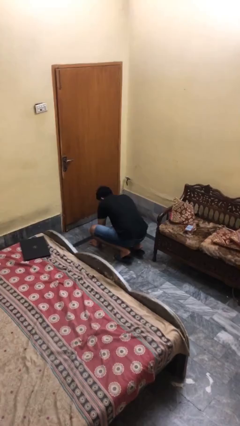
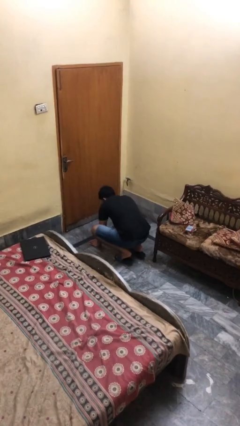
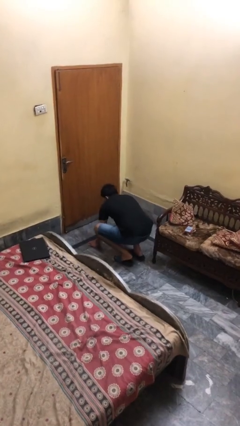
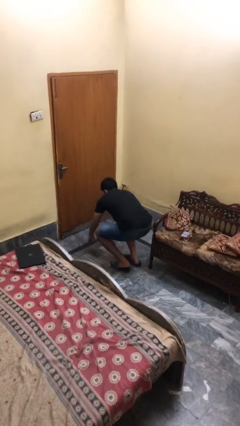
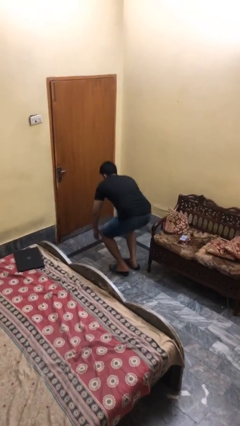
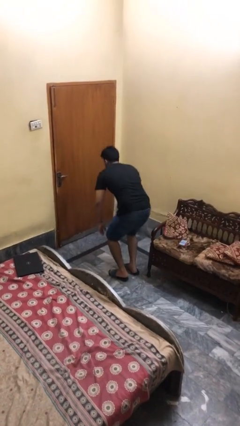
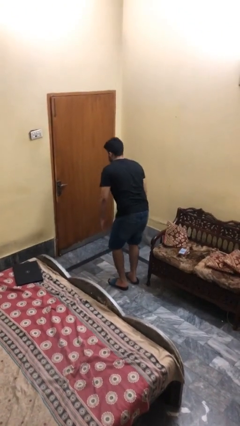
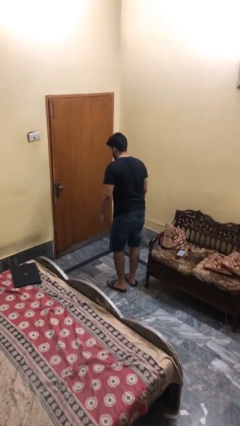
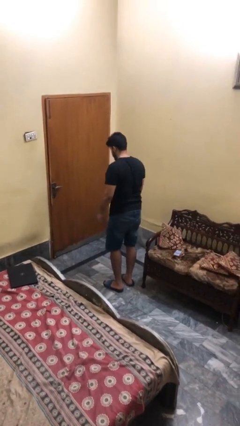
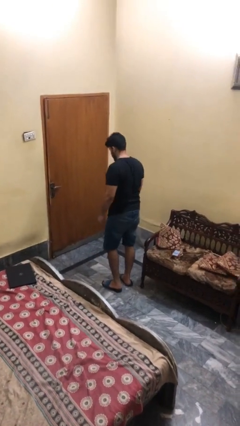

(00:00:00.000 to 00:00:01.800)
person stands up from floor

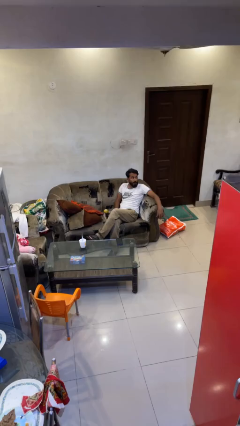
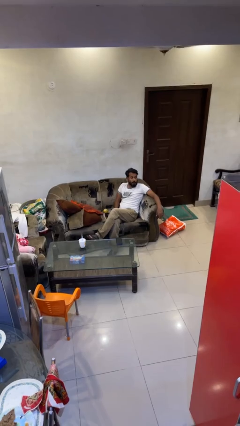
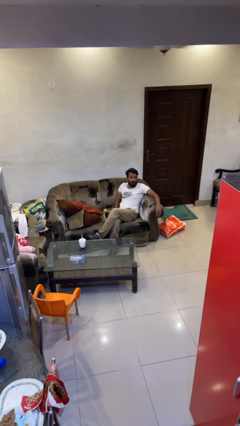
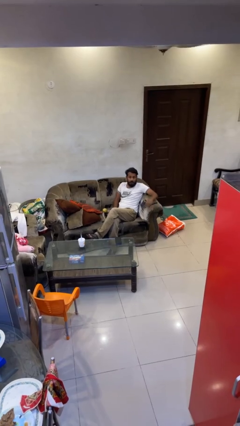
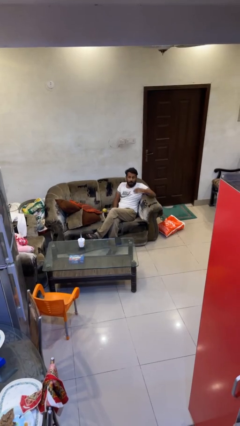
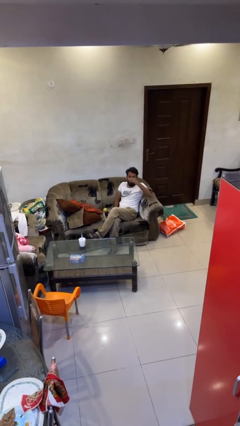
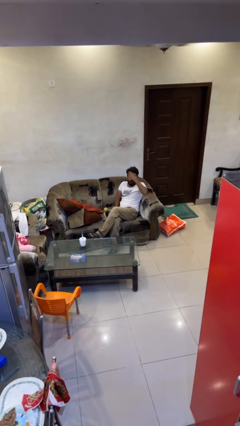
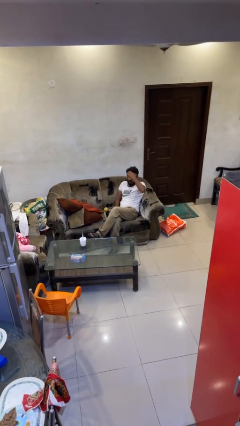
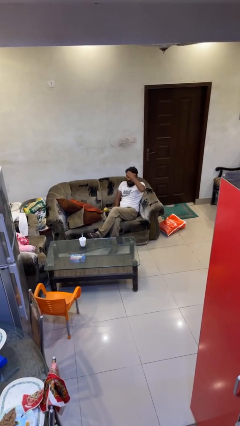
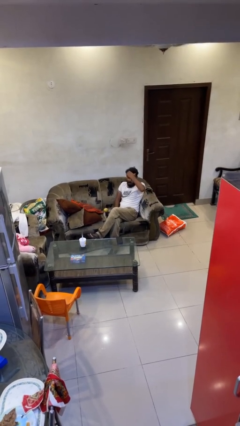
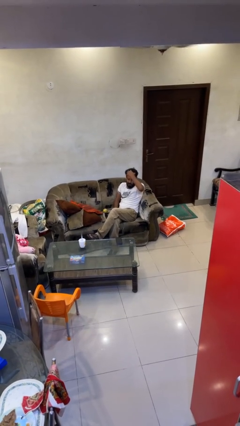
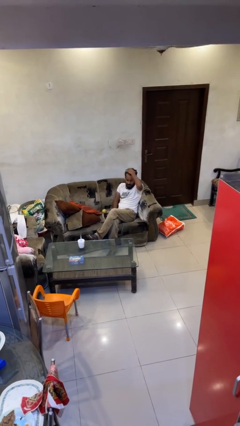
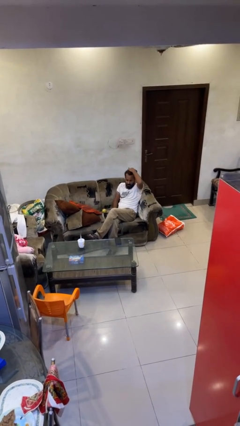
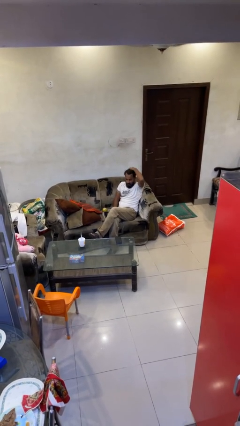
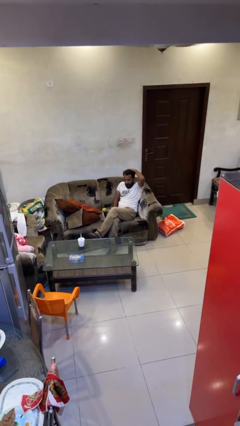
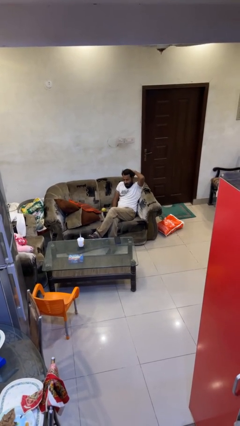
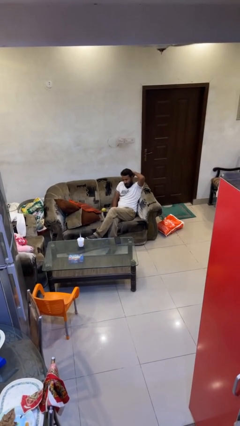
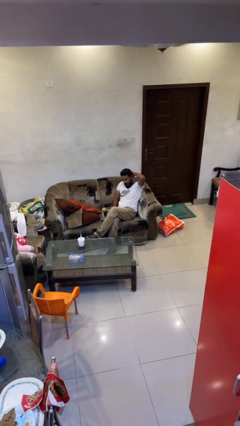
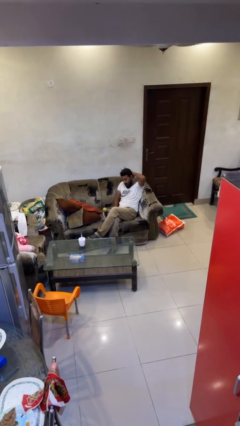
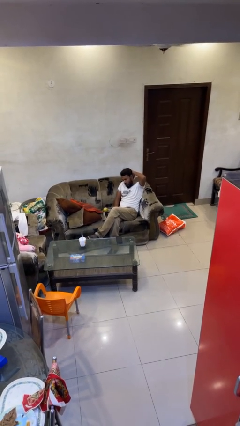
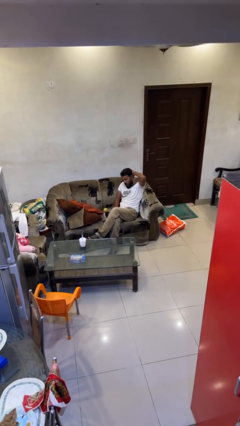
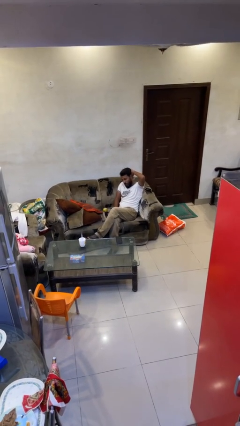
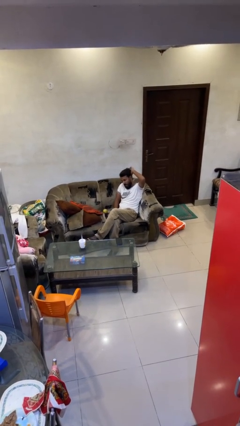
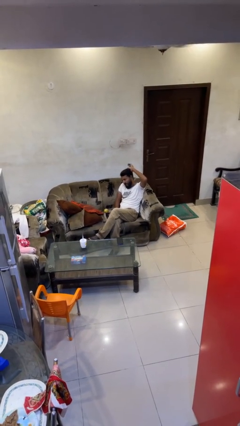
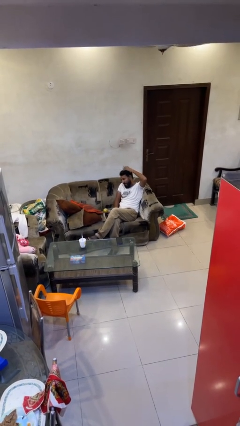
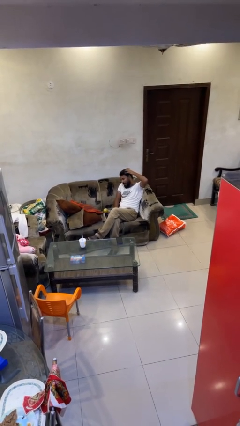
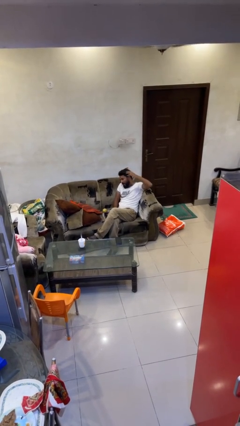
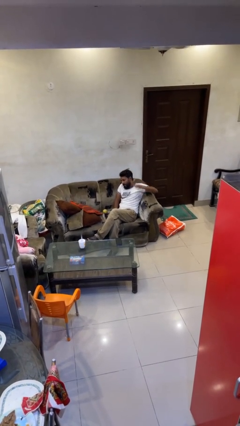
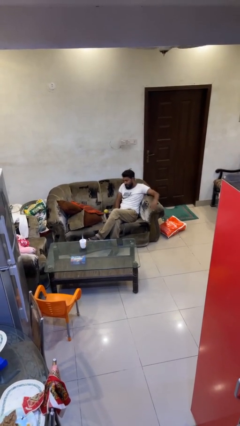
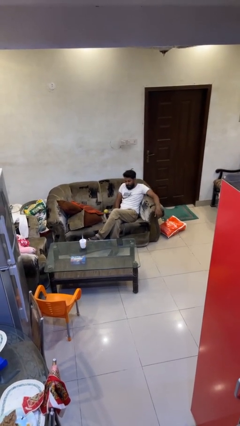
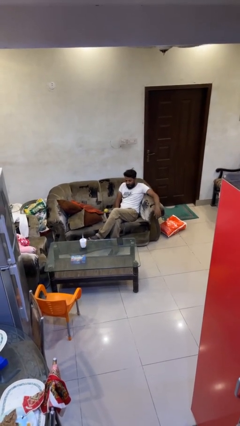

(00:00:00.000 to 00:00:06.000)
person strokes hair

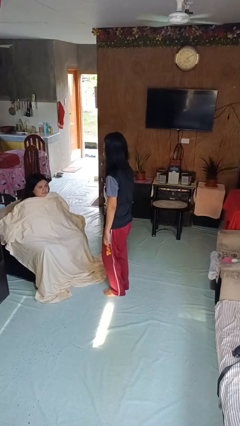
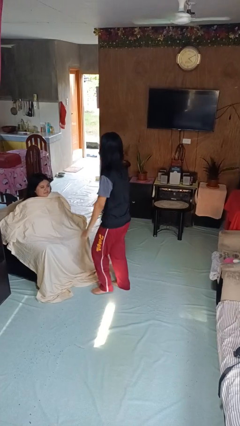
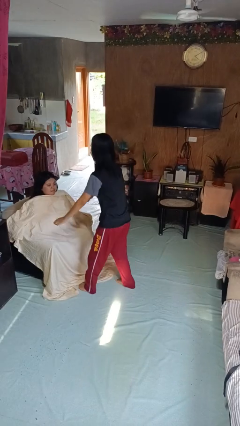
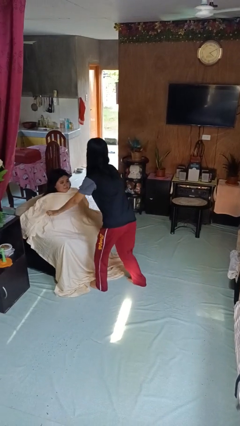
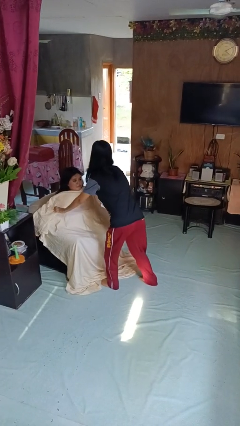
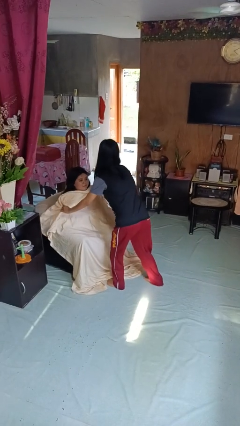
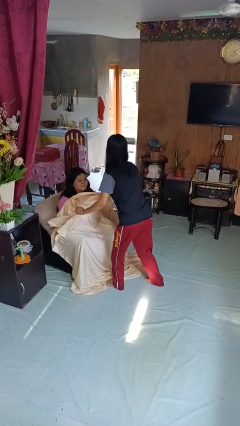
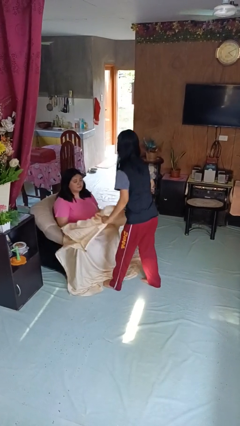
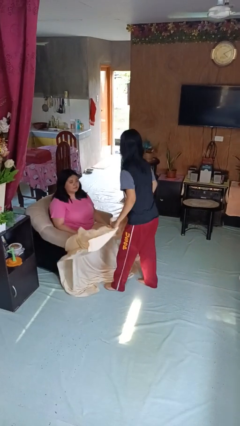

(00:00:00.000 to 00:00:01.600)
person uncovers friend with blanket

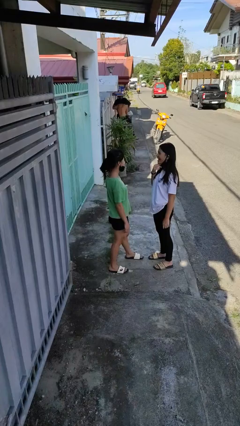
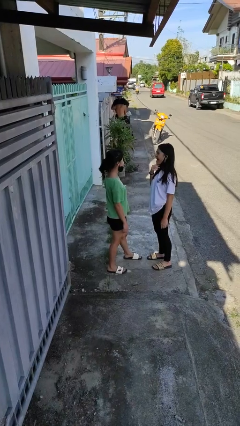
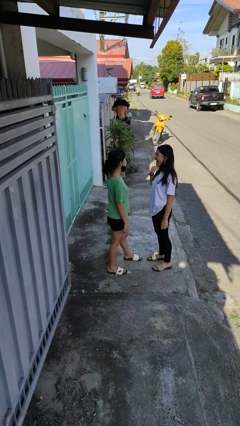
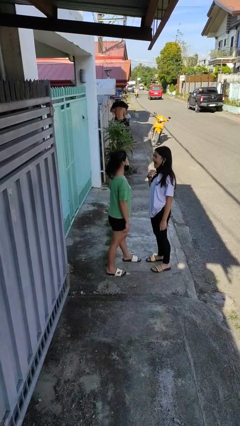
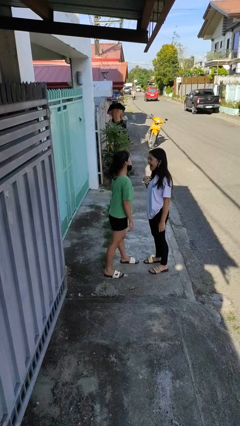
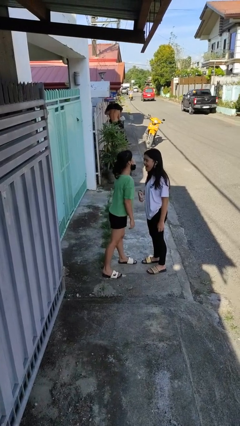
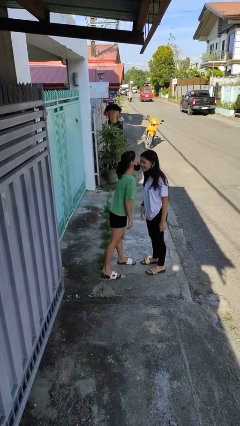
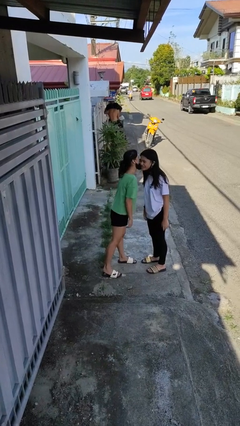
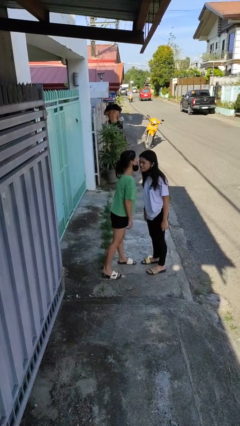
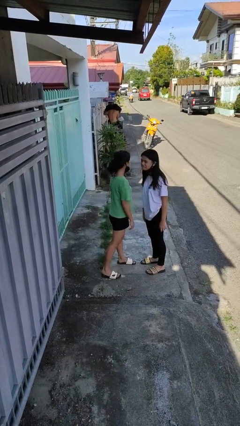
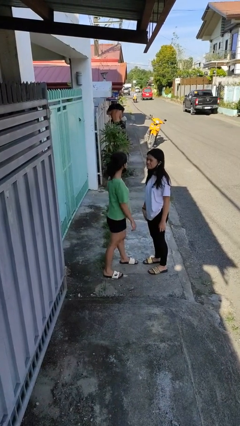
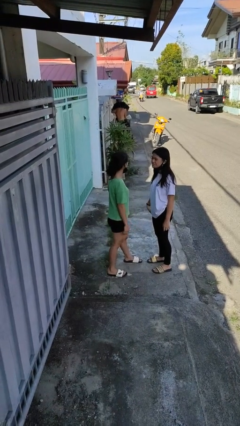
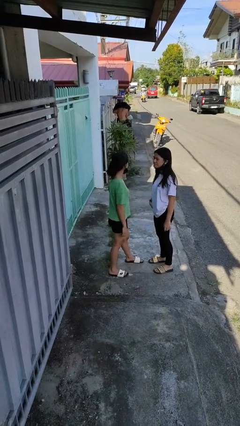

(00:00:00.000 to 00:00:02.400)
person kisses cheek of person

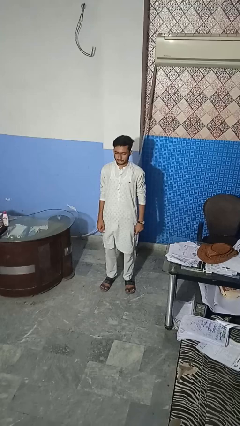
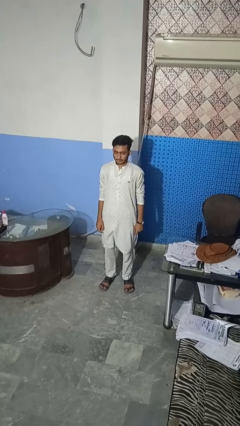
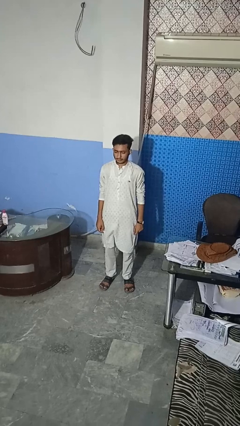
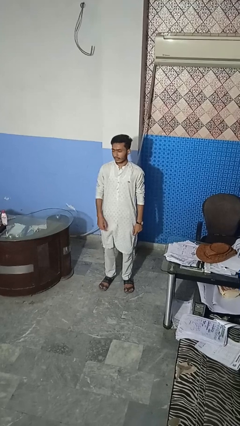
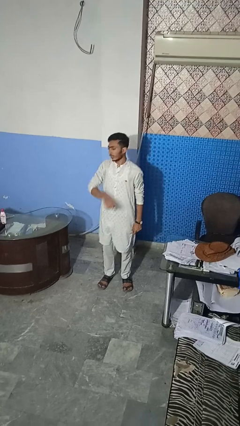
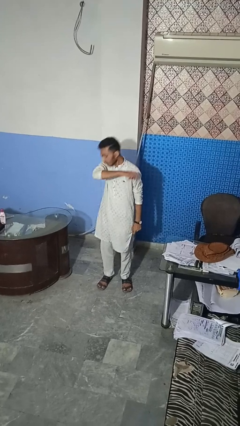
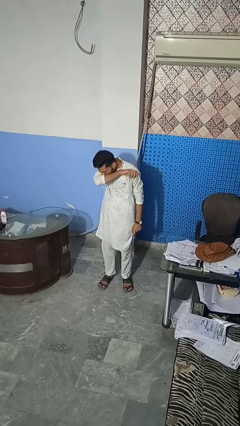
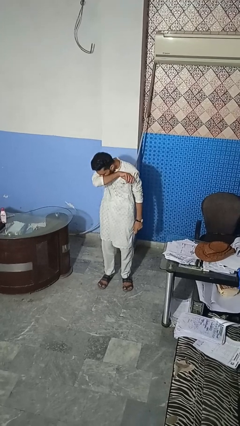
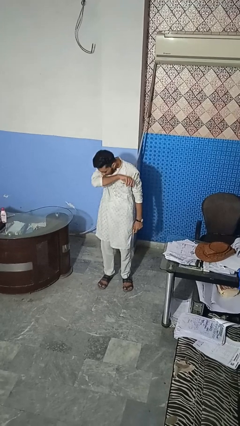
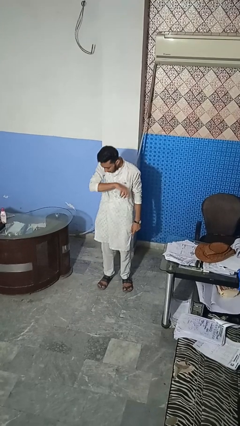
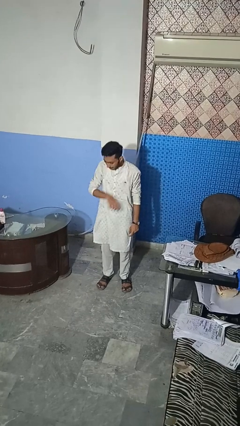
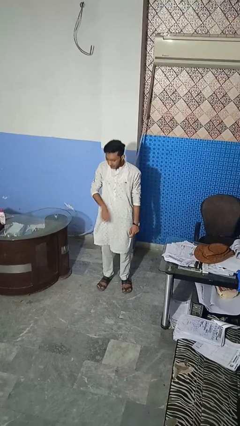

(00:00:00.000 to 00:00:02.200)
person sneezes into arm

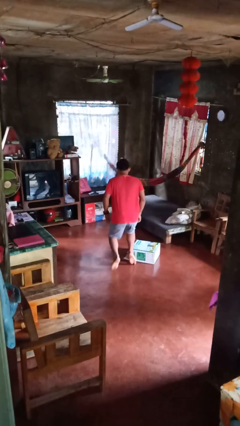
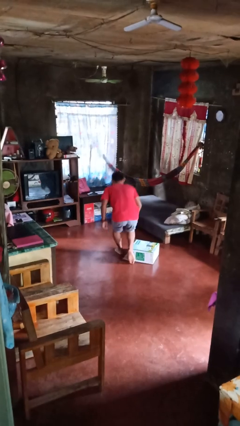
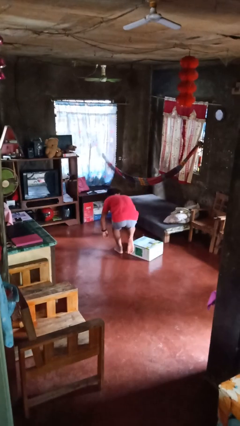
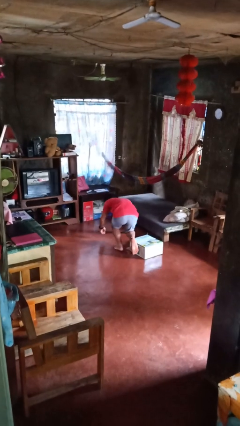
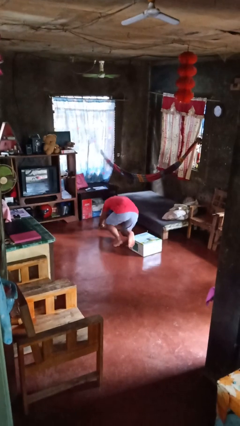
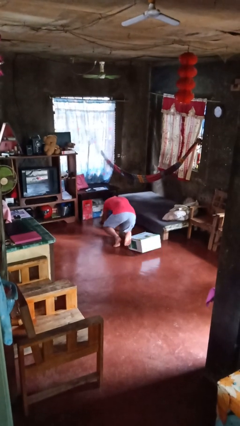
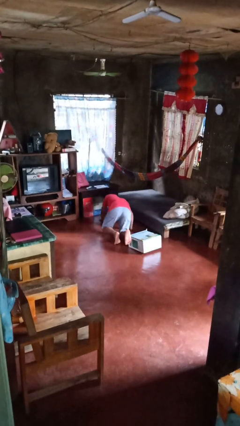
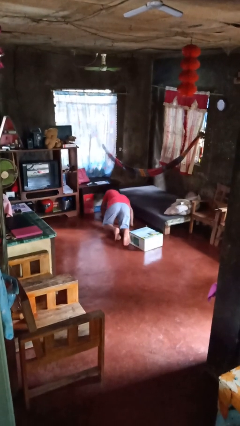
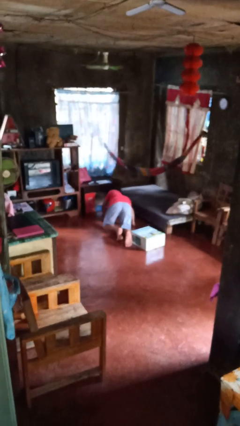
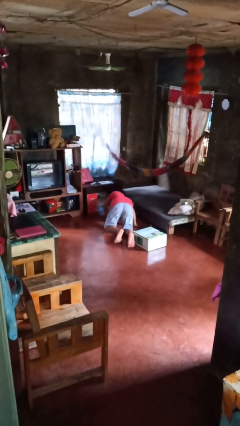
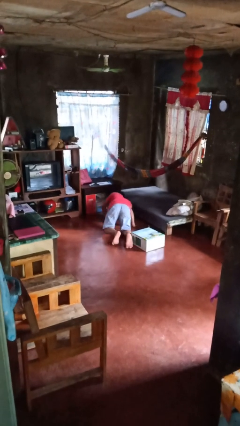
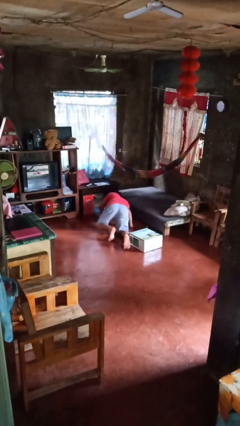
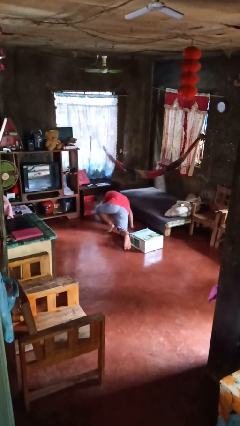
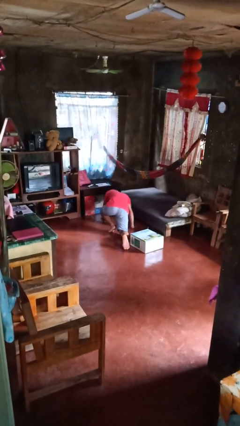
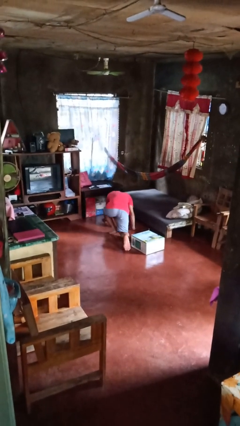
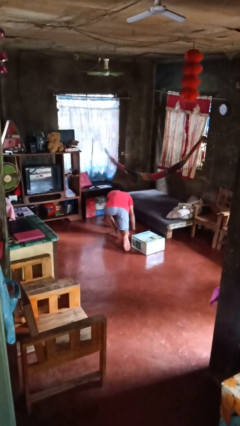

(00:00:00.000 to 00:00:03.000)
person trips on object on floor
